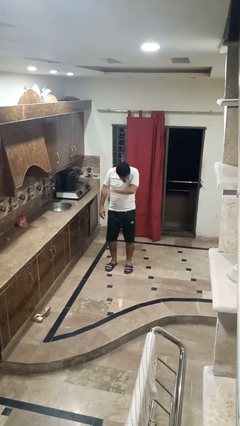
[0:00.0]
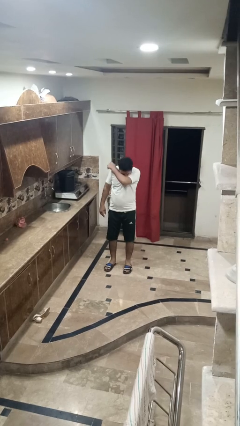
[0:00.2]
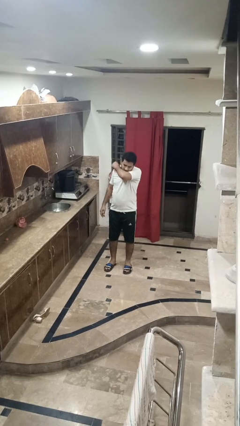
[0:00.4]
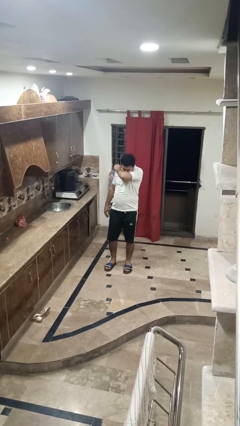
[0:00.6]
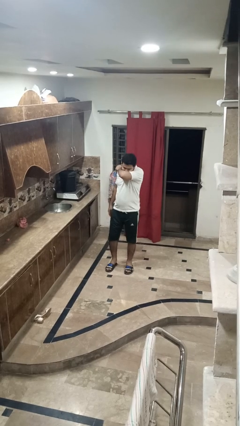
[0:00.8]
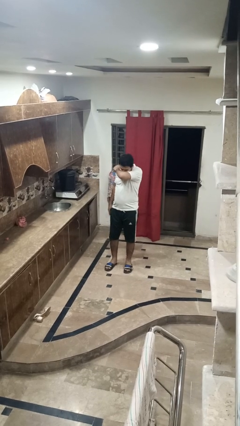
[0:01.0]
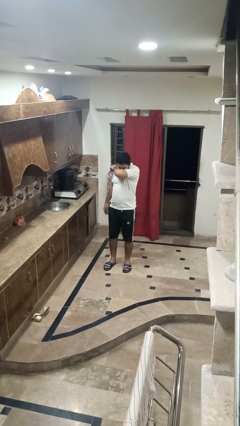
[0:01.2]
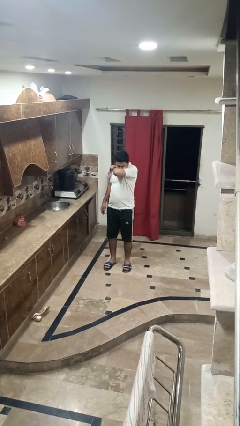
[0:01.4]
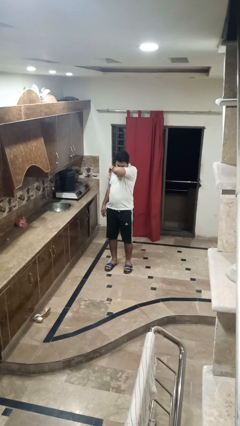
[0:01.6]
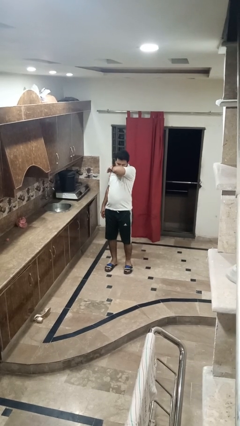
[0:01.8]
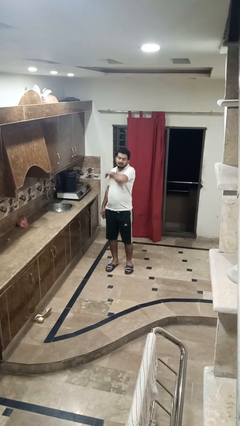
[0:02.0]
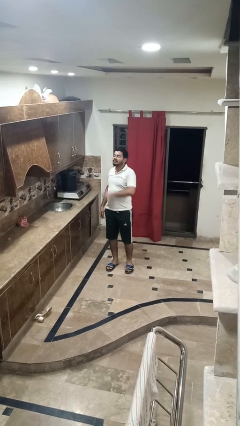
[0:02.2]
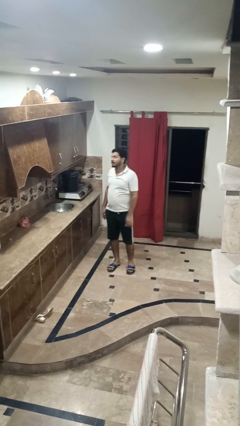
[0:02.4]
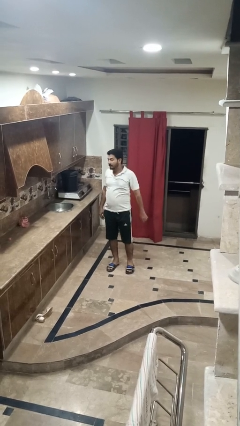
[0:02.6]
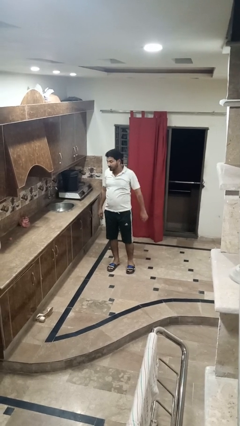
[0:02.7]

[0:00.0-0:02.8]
person sneezes into arm

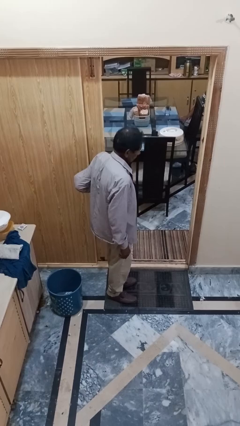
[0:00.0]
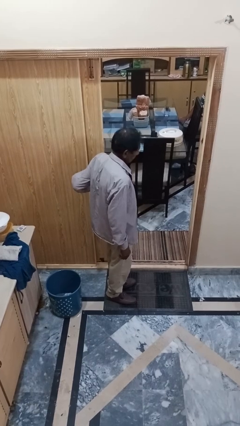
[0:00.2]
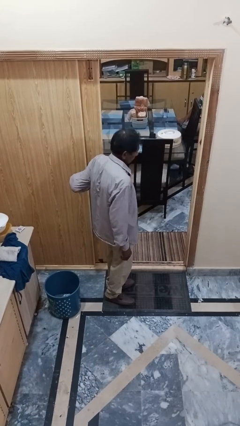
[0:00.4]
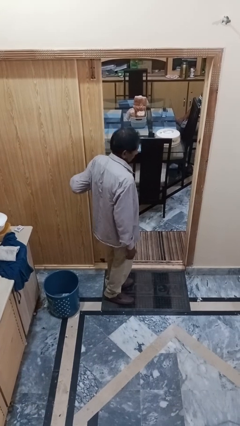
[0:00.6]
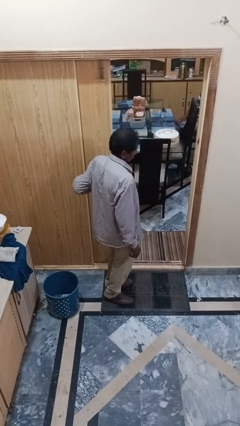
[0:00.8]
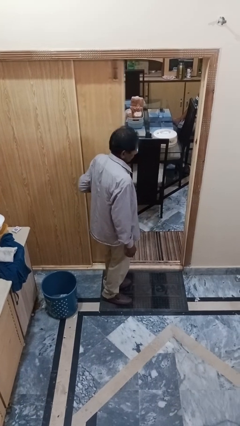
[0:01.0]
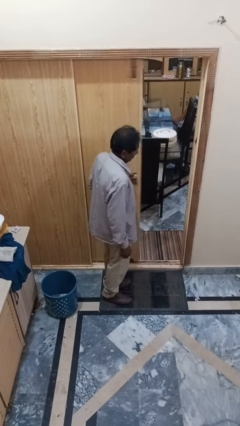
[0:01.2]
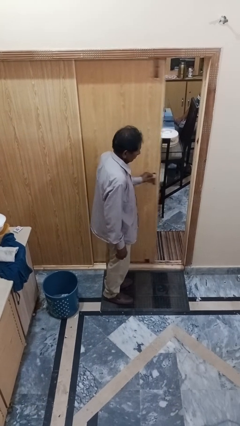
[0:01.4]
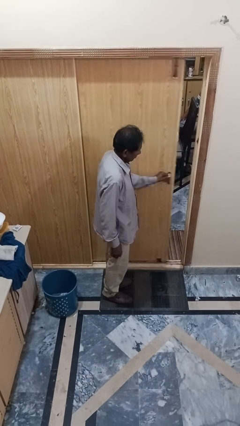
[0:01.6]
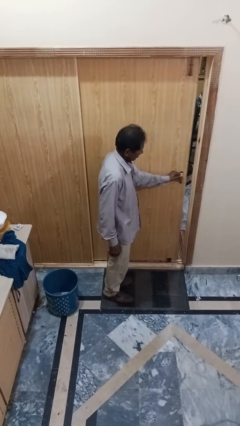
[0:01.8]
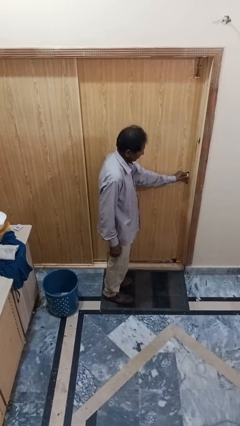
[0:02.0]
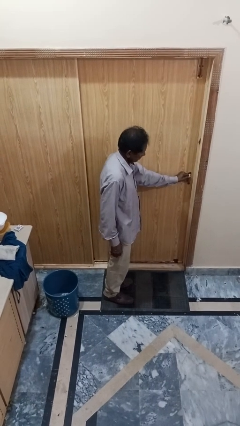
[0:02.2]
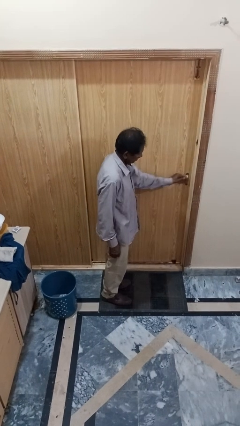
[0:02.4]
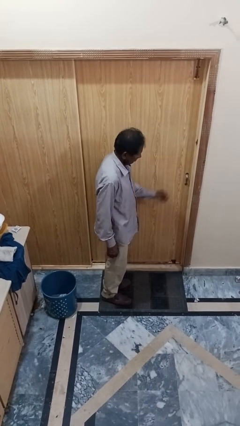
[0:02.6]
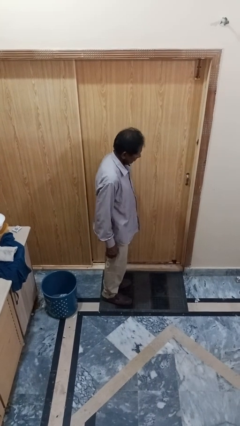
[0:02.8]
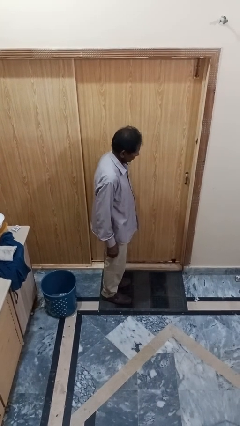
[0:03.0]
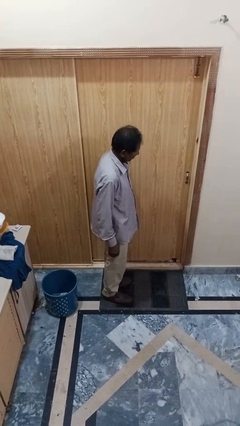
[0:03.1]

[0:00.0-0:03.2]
person closes sliding door

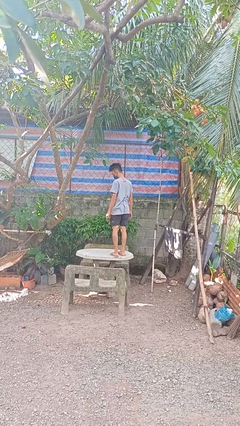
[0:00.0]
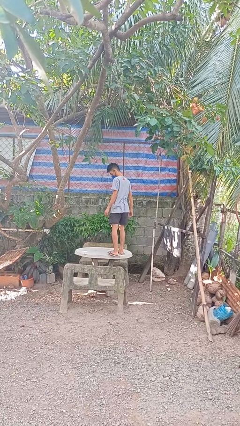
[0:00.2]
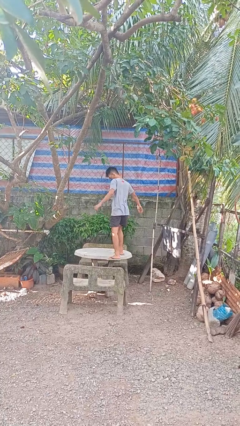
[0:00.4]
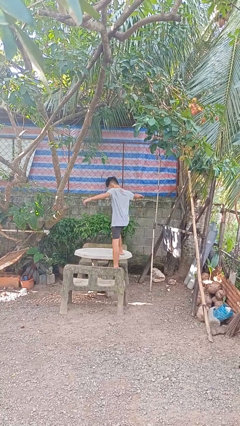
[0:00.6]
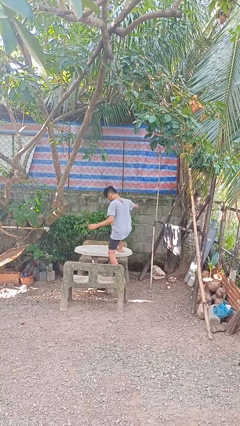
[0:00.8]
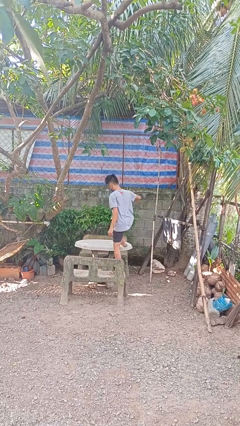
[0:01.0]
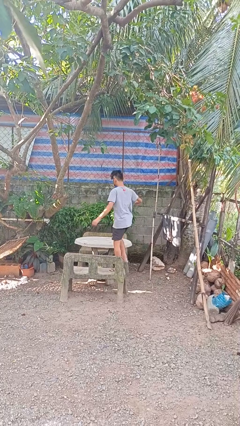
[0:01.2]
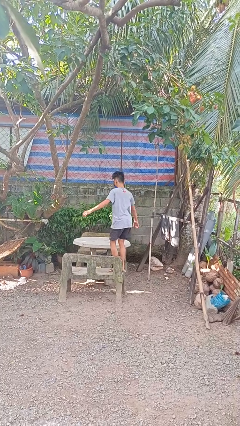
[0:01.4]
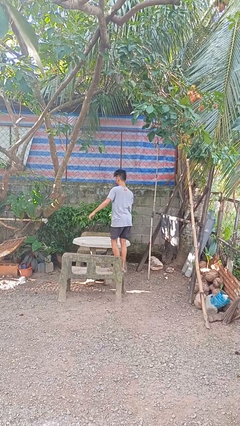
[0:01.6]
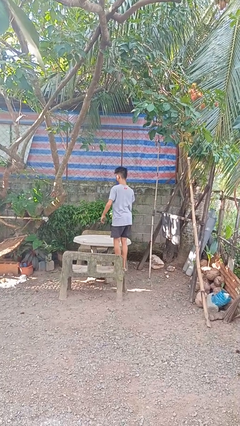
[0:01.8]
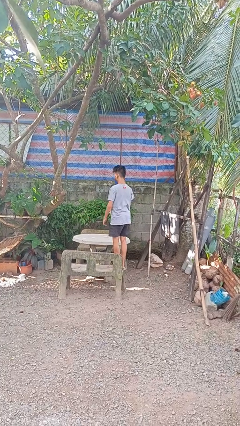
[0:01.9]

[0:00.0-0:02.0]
person climbs off table

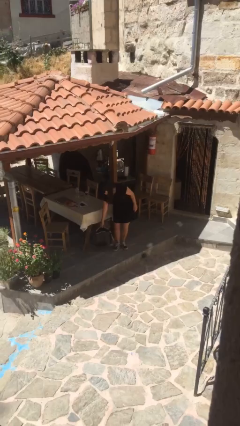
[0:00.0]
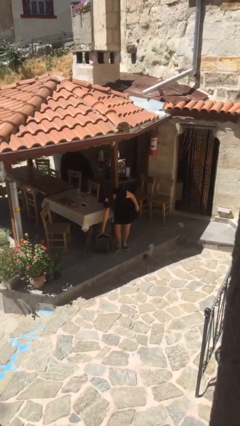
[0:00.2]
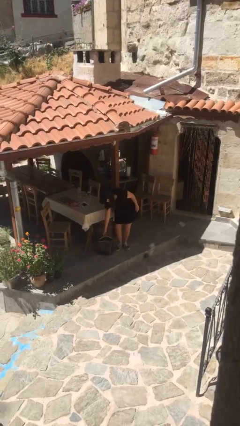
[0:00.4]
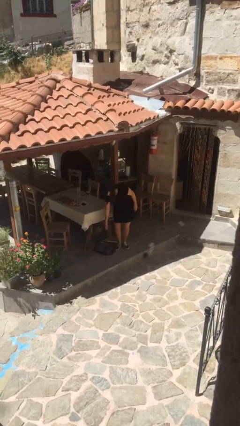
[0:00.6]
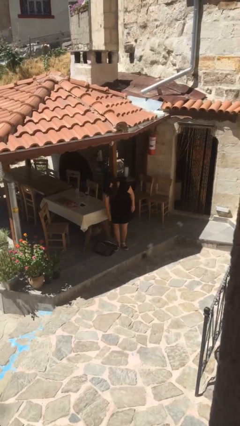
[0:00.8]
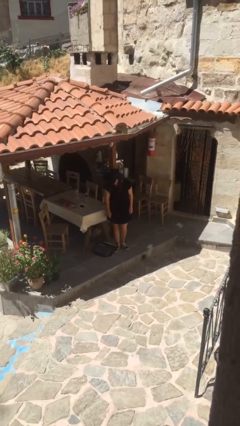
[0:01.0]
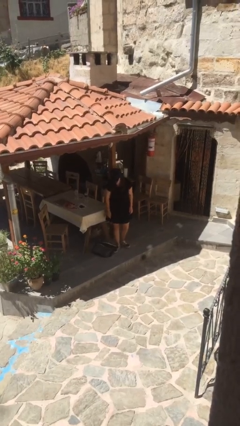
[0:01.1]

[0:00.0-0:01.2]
person puts down object on floor

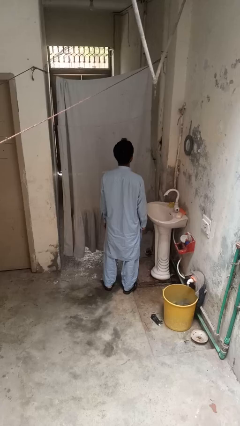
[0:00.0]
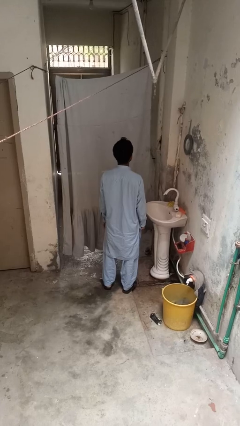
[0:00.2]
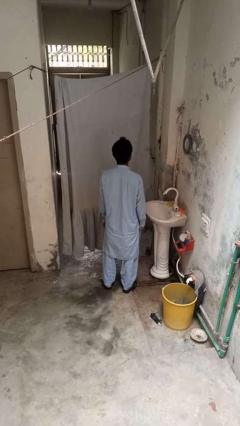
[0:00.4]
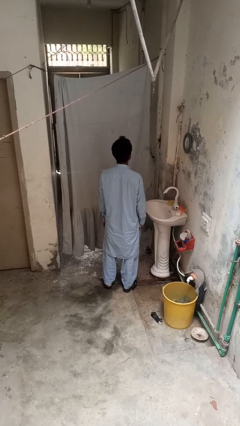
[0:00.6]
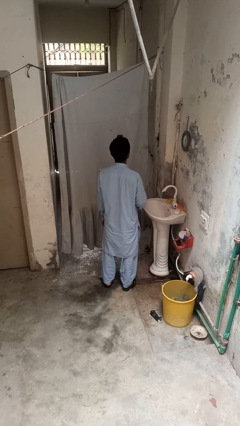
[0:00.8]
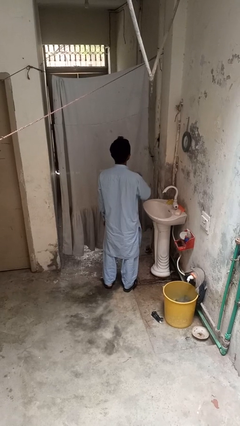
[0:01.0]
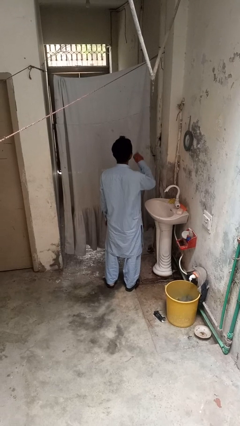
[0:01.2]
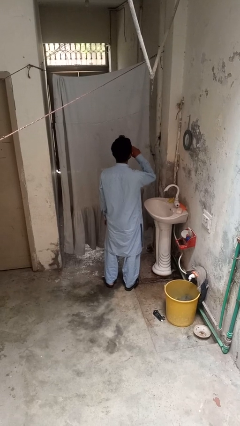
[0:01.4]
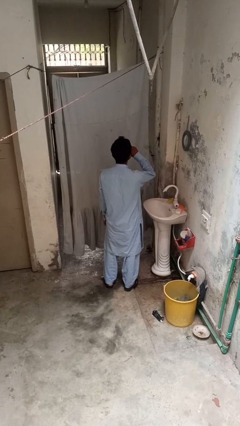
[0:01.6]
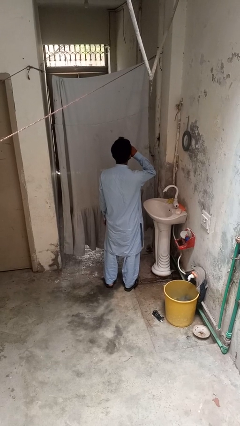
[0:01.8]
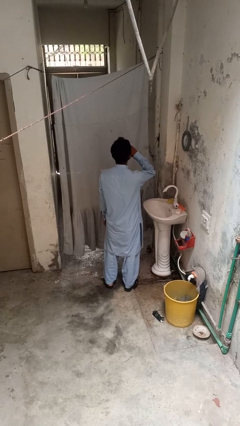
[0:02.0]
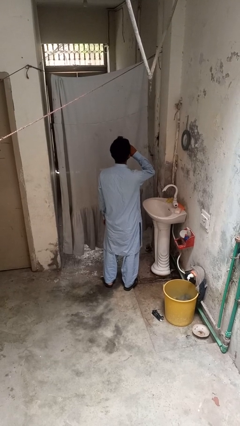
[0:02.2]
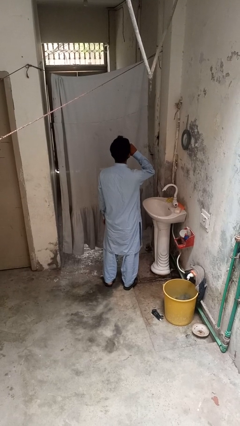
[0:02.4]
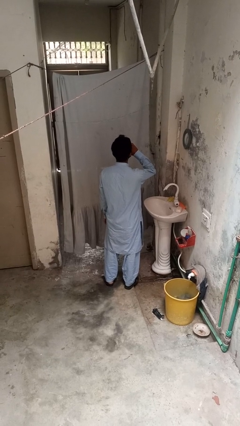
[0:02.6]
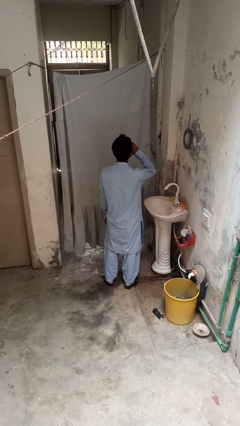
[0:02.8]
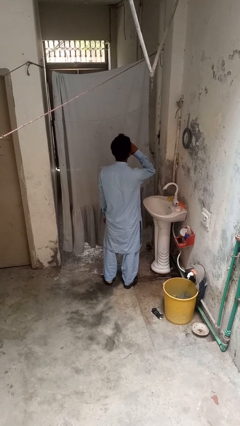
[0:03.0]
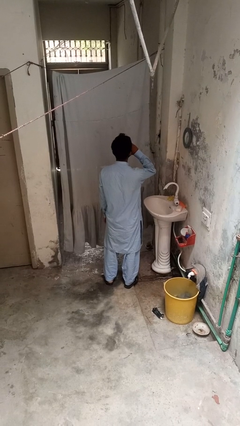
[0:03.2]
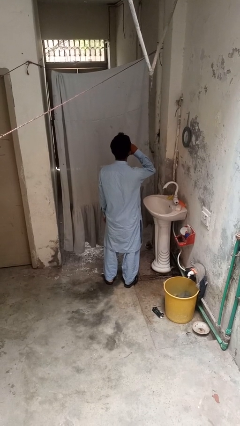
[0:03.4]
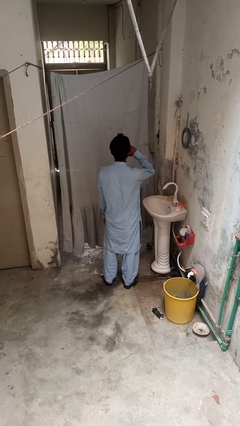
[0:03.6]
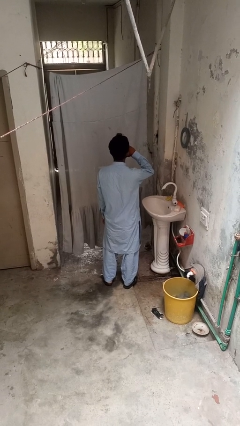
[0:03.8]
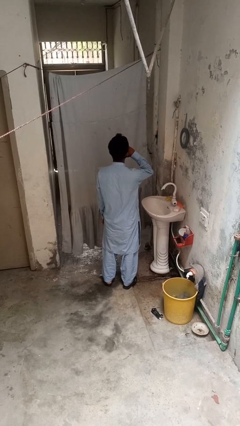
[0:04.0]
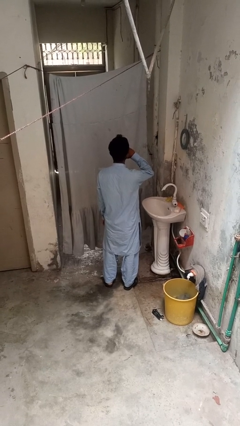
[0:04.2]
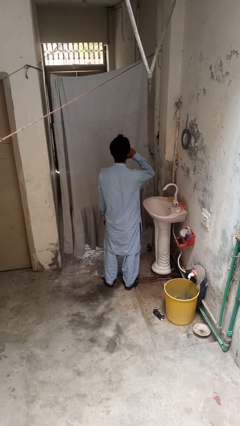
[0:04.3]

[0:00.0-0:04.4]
person yawns

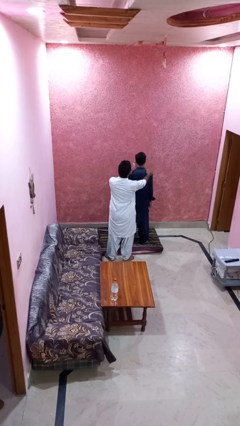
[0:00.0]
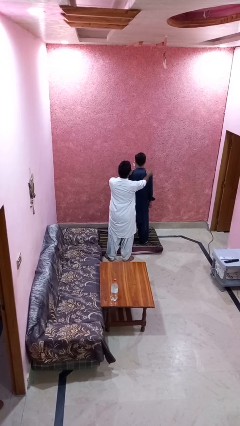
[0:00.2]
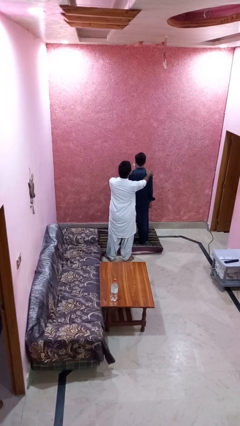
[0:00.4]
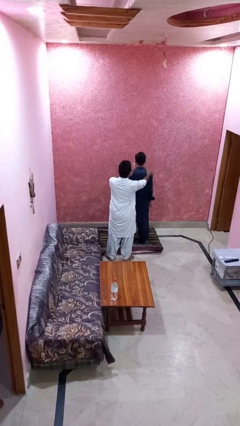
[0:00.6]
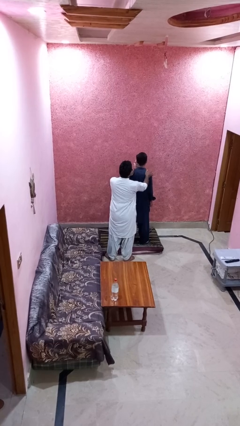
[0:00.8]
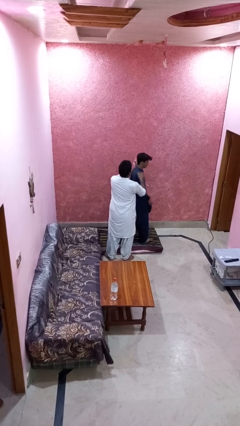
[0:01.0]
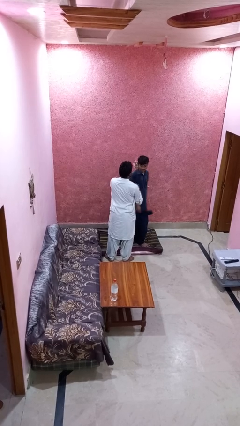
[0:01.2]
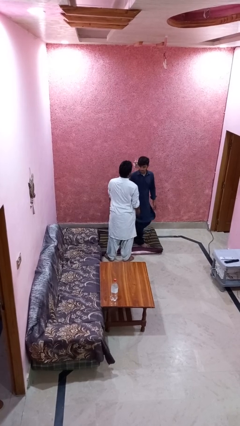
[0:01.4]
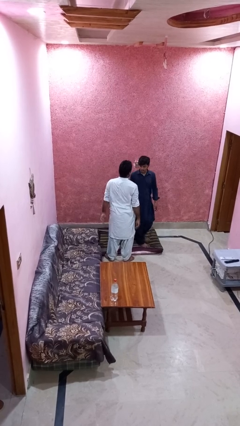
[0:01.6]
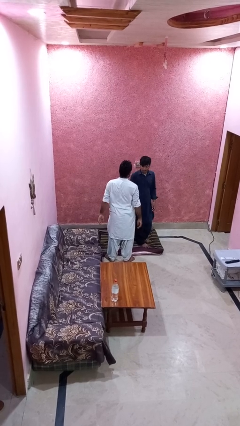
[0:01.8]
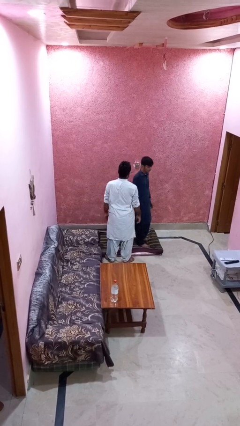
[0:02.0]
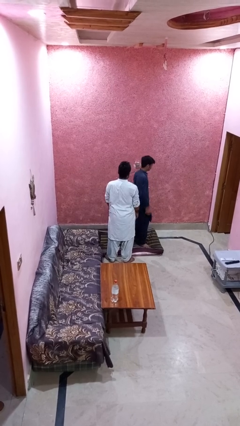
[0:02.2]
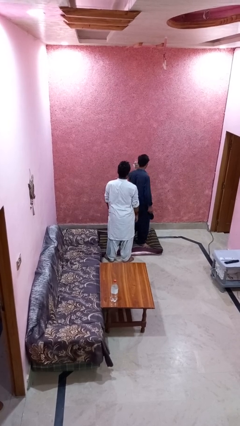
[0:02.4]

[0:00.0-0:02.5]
person spins person around

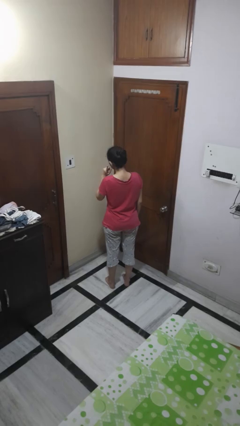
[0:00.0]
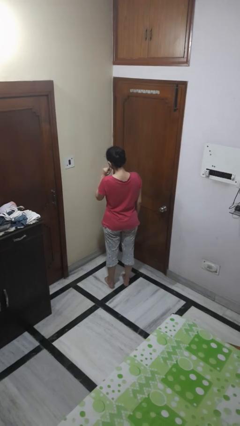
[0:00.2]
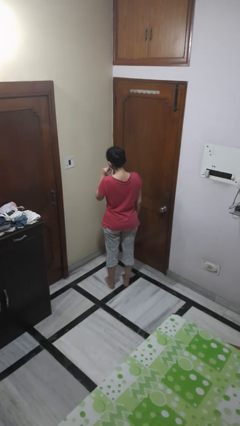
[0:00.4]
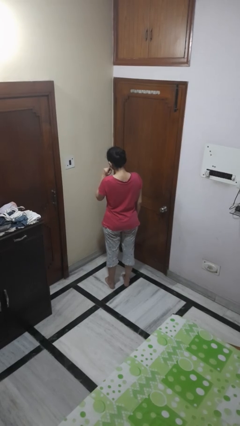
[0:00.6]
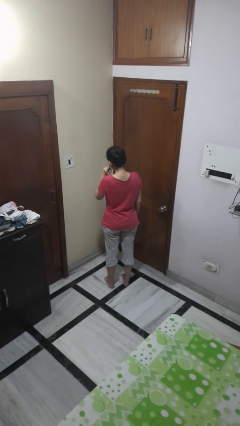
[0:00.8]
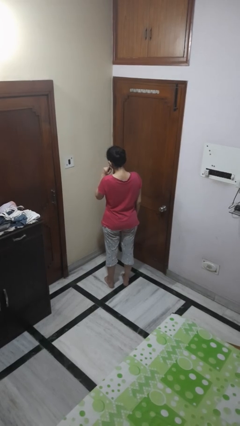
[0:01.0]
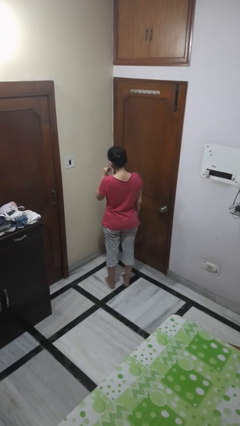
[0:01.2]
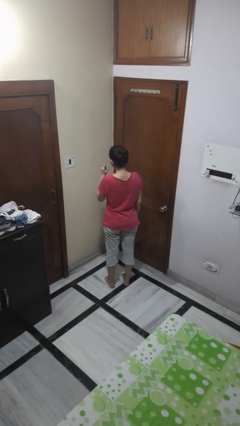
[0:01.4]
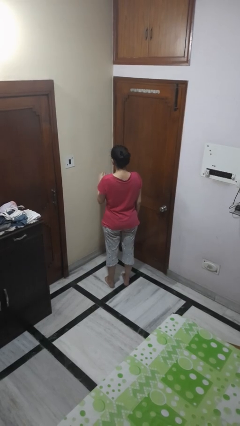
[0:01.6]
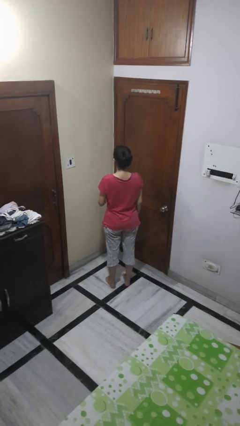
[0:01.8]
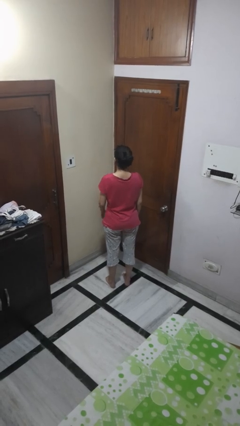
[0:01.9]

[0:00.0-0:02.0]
person gestures listen closely
